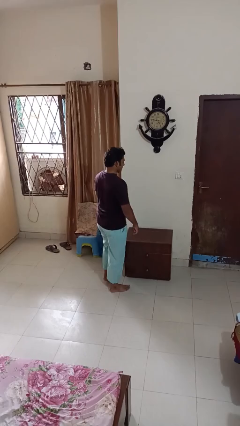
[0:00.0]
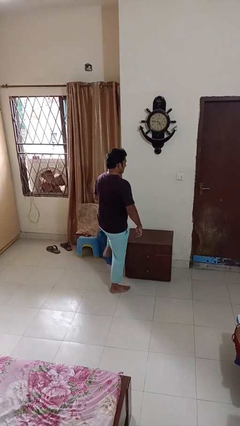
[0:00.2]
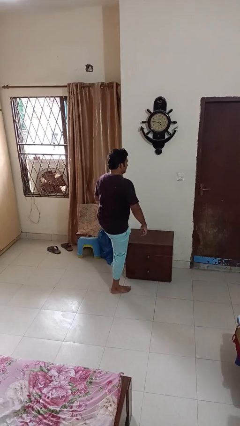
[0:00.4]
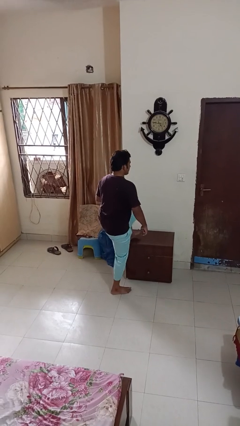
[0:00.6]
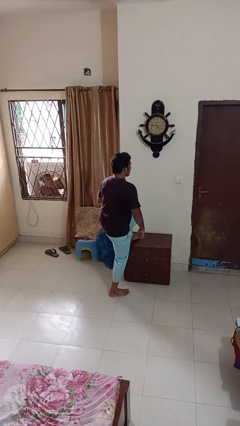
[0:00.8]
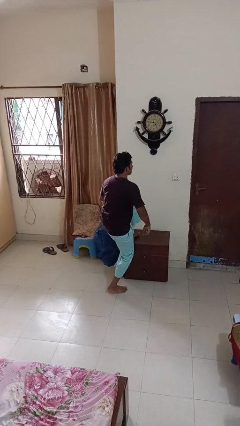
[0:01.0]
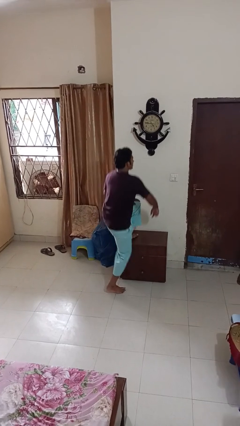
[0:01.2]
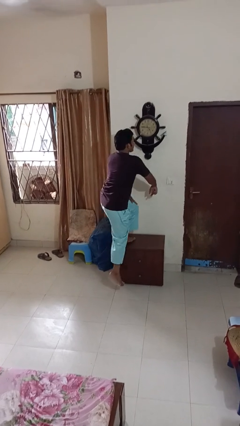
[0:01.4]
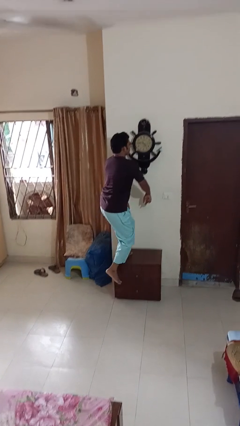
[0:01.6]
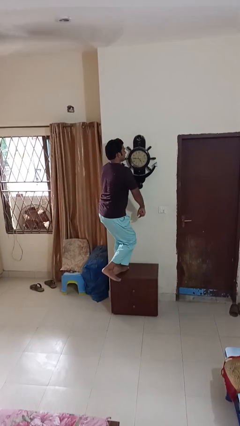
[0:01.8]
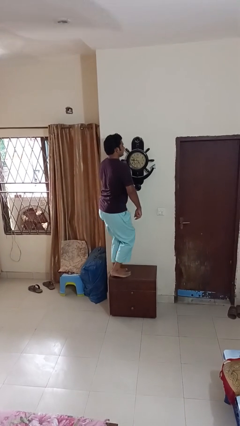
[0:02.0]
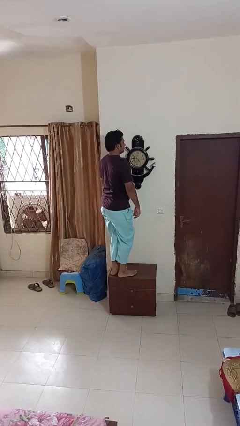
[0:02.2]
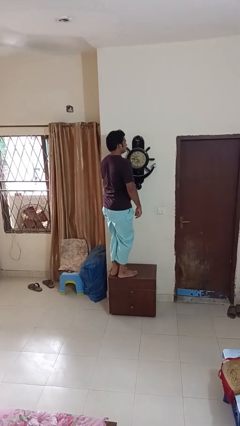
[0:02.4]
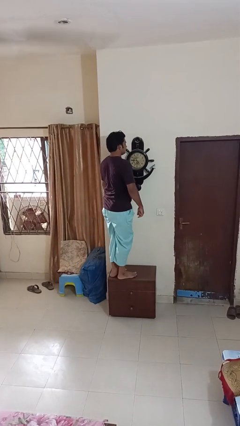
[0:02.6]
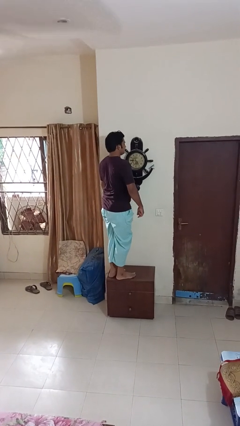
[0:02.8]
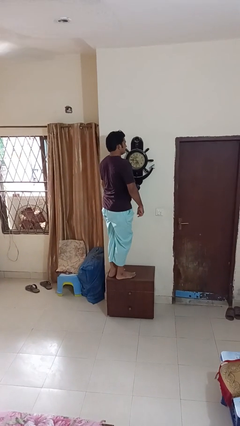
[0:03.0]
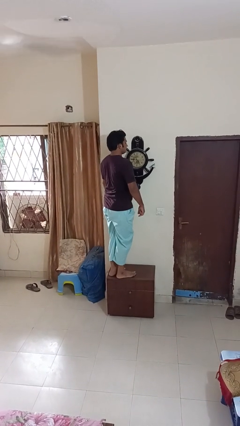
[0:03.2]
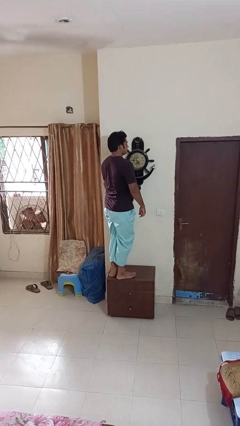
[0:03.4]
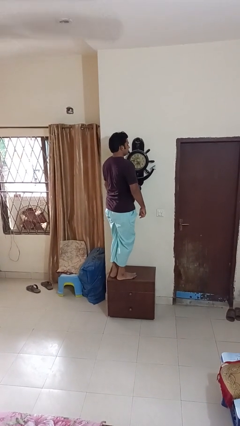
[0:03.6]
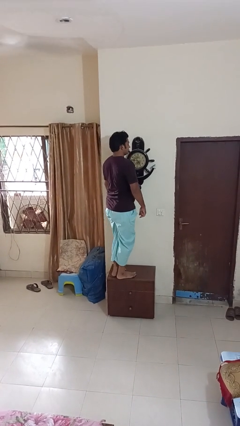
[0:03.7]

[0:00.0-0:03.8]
person climbs on table

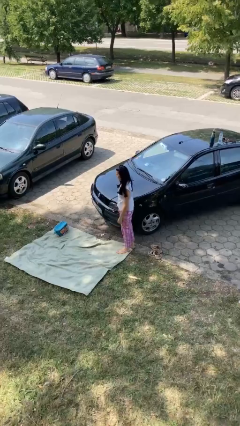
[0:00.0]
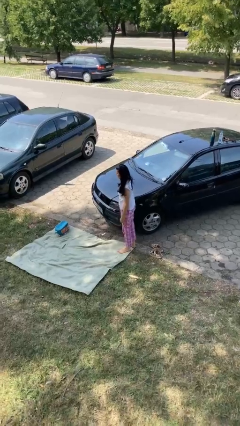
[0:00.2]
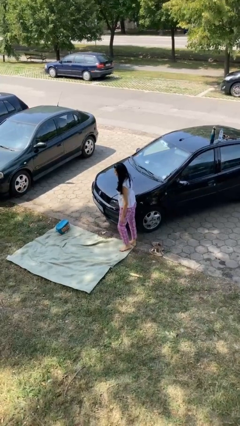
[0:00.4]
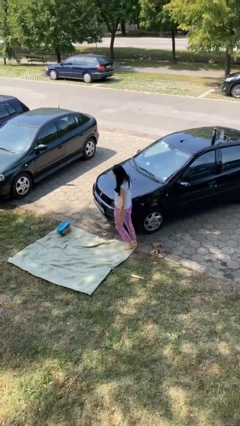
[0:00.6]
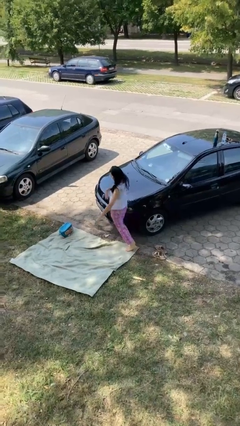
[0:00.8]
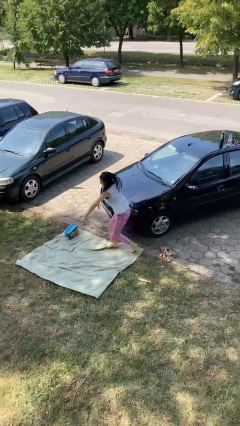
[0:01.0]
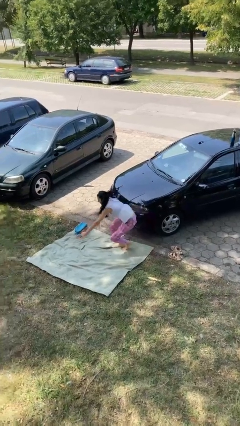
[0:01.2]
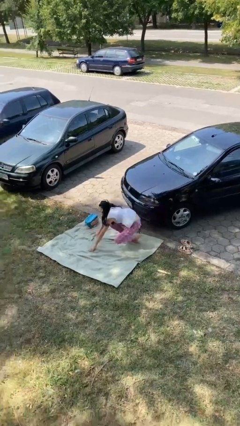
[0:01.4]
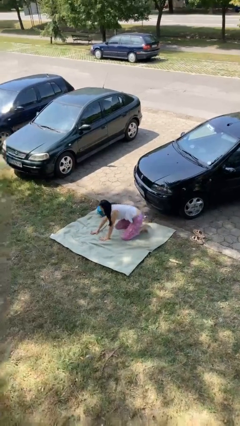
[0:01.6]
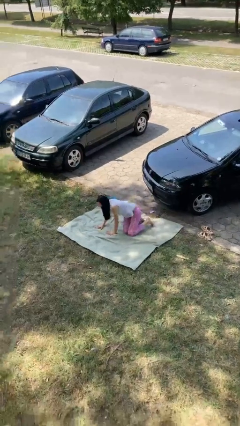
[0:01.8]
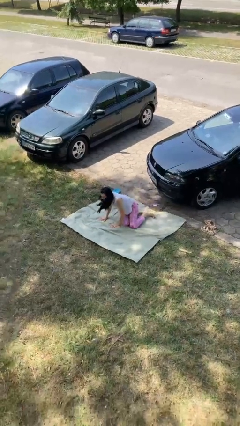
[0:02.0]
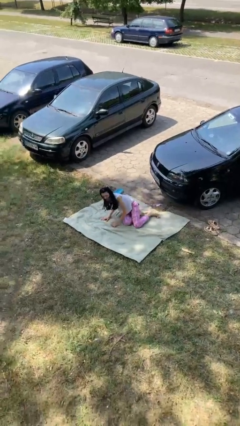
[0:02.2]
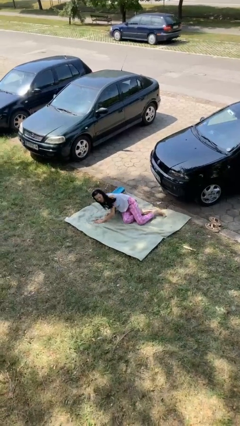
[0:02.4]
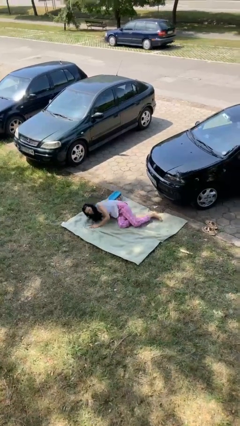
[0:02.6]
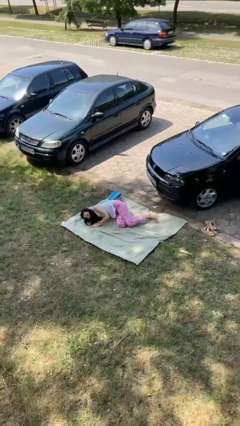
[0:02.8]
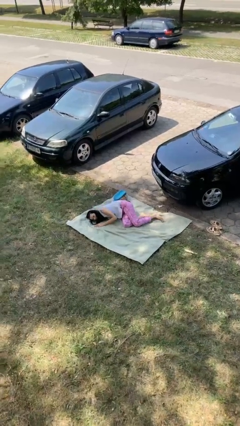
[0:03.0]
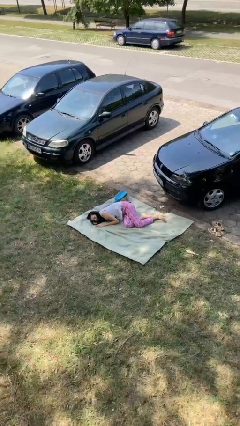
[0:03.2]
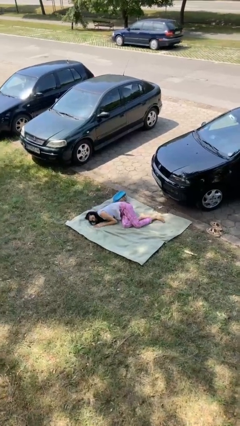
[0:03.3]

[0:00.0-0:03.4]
person trips on object on floor

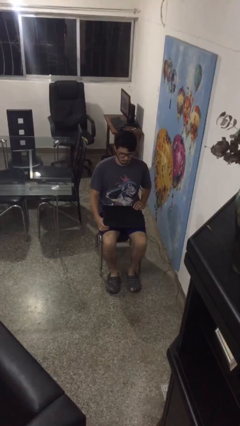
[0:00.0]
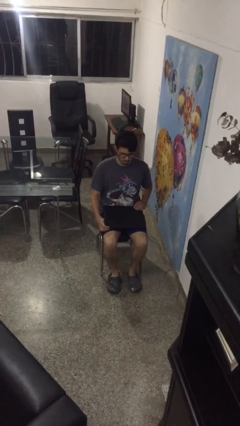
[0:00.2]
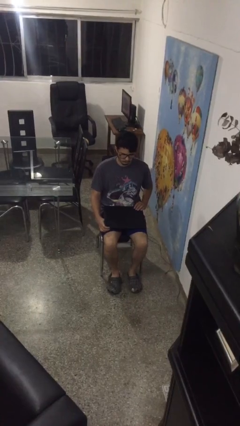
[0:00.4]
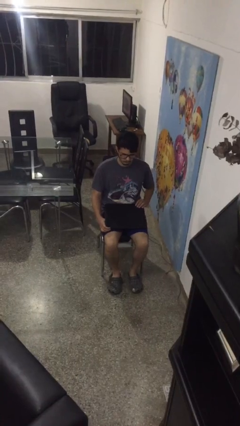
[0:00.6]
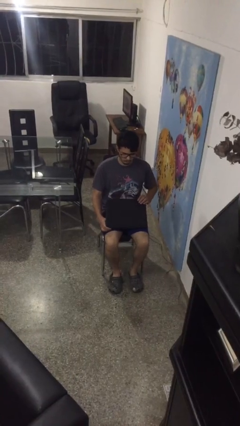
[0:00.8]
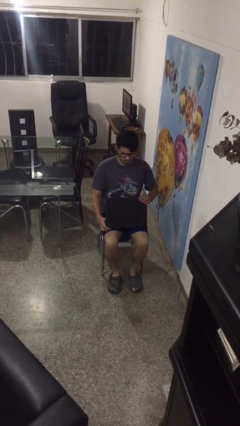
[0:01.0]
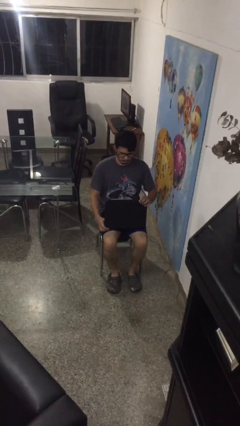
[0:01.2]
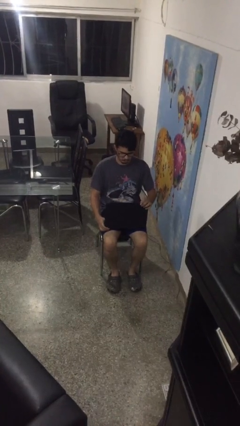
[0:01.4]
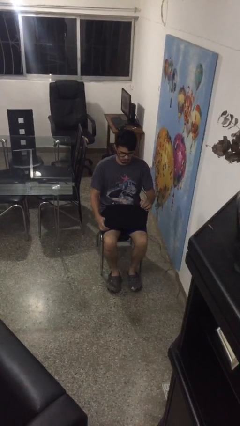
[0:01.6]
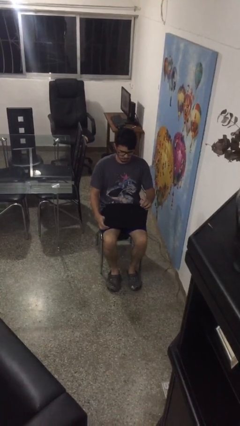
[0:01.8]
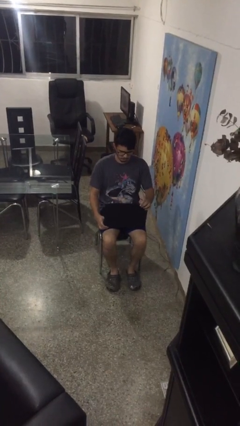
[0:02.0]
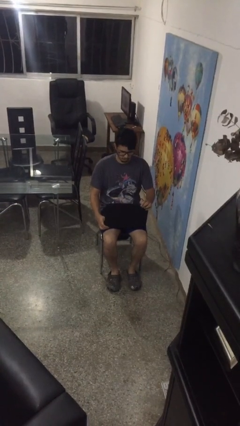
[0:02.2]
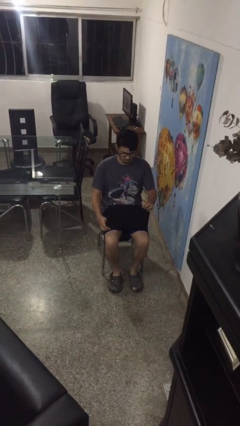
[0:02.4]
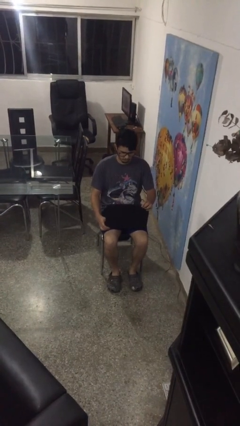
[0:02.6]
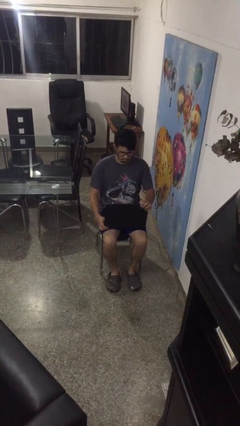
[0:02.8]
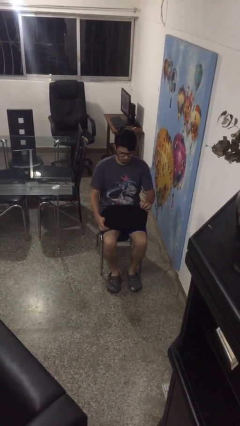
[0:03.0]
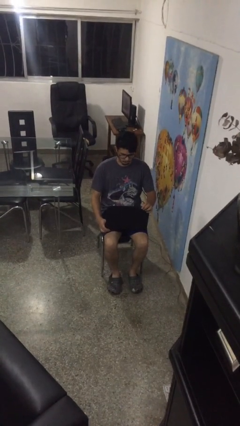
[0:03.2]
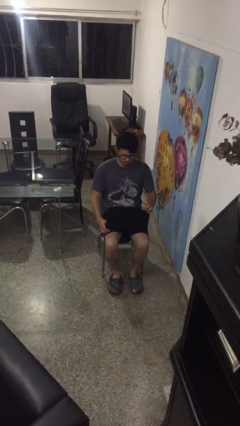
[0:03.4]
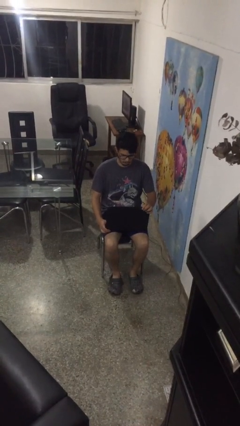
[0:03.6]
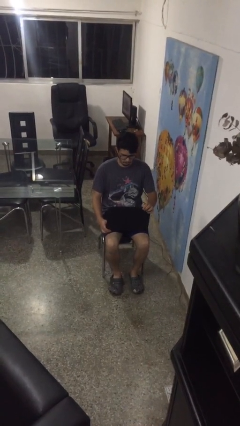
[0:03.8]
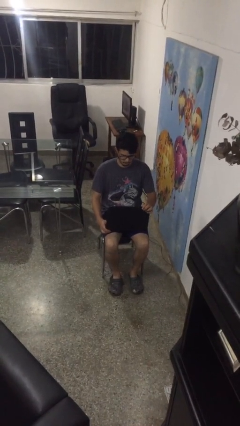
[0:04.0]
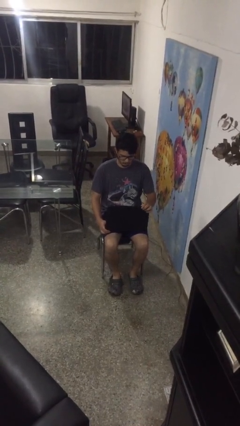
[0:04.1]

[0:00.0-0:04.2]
person opens laptop

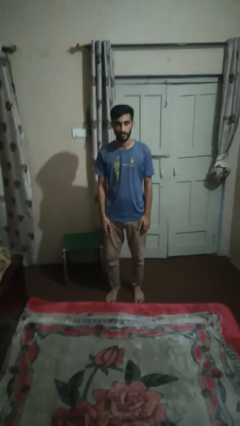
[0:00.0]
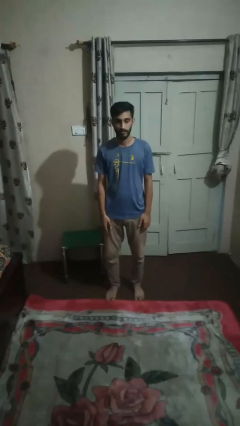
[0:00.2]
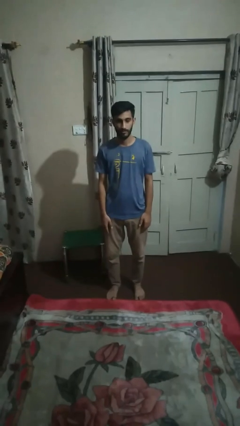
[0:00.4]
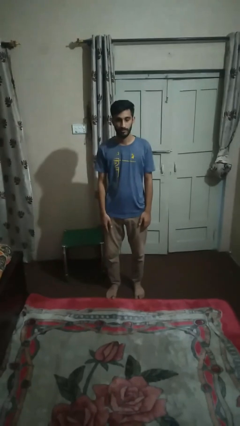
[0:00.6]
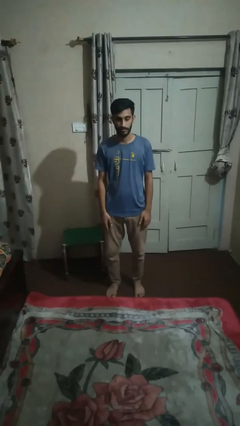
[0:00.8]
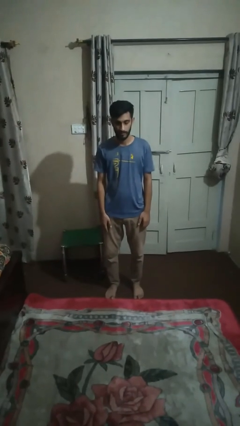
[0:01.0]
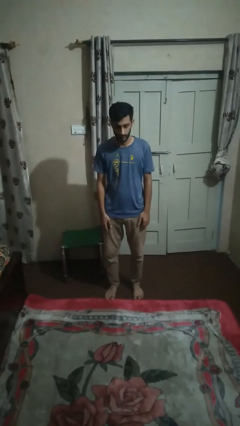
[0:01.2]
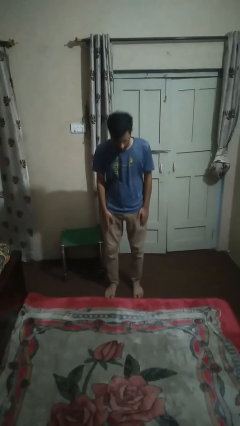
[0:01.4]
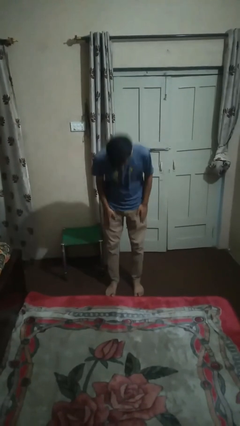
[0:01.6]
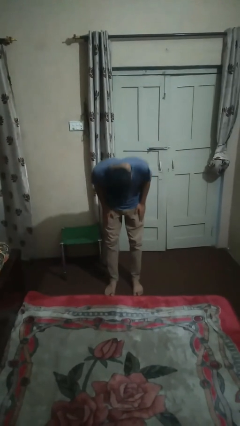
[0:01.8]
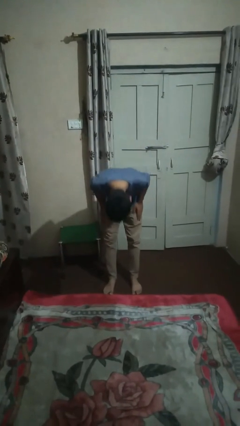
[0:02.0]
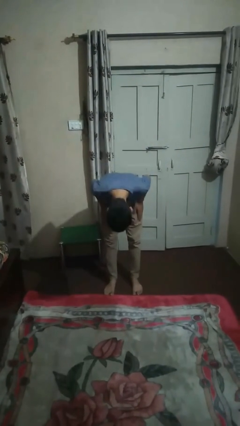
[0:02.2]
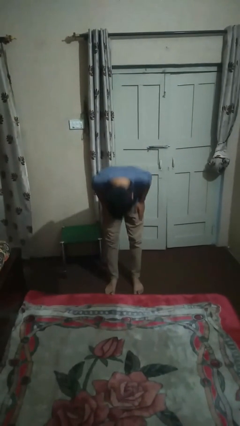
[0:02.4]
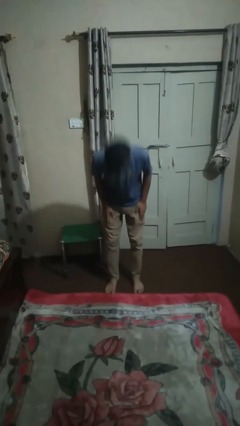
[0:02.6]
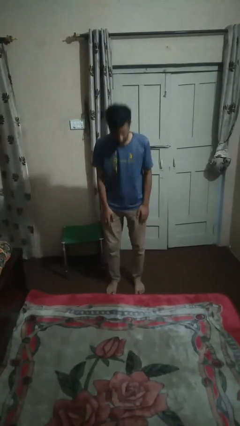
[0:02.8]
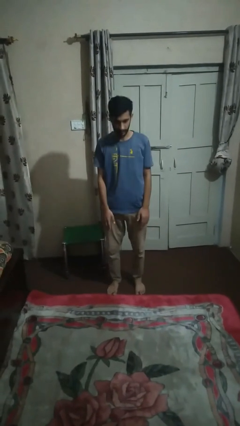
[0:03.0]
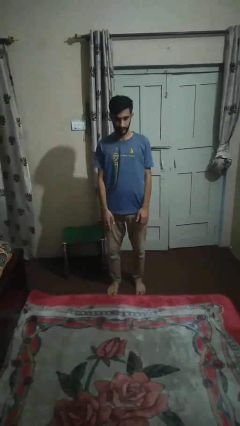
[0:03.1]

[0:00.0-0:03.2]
person bows

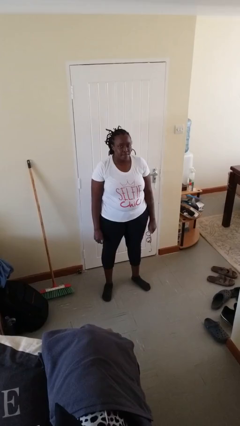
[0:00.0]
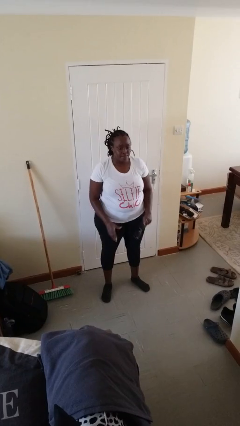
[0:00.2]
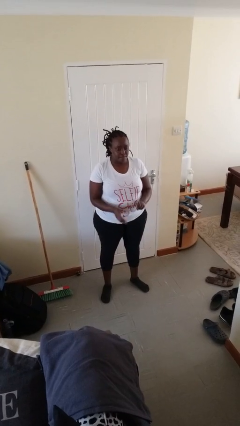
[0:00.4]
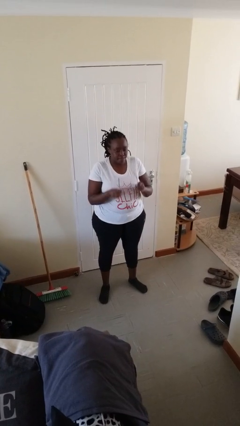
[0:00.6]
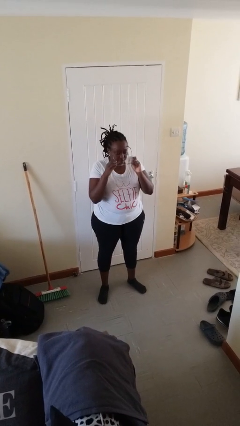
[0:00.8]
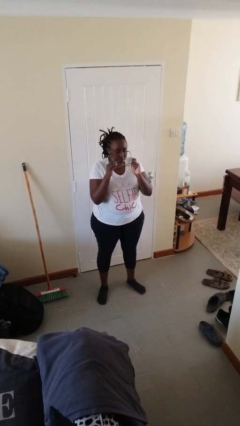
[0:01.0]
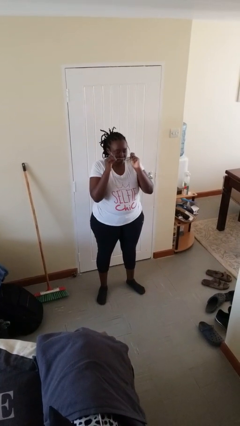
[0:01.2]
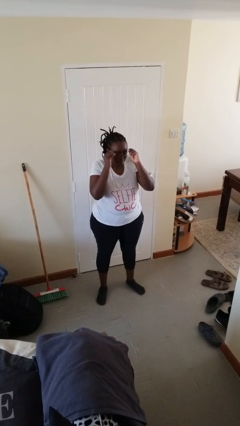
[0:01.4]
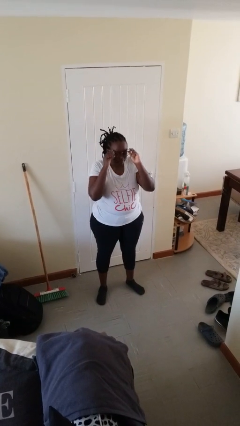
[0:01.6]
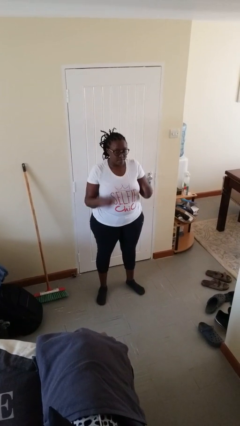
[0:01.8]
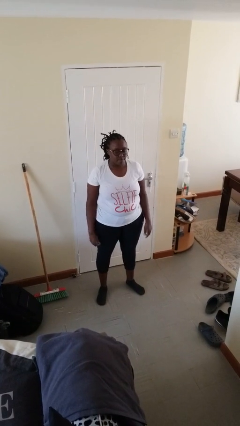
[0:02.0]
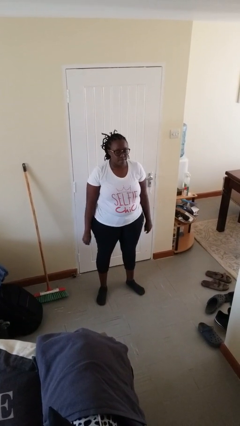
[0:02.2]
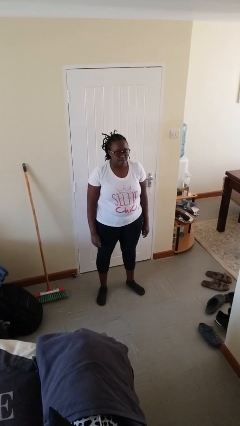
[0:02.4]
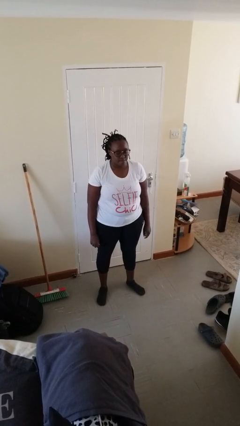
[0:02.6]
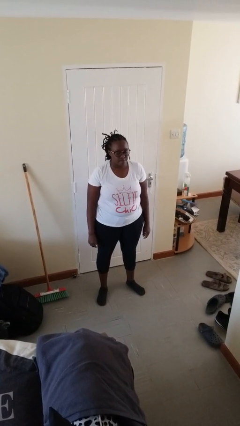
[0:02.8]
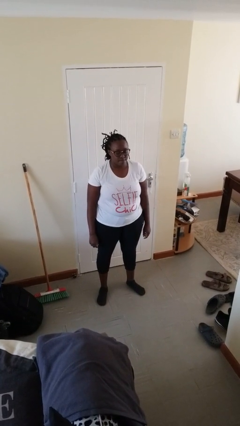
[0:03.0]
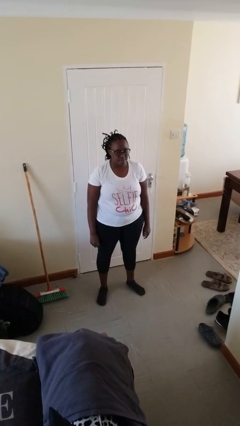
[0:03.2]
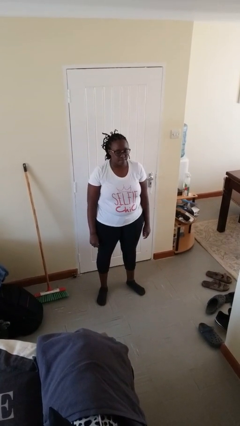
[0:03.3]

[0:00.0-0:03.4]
person puts on glasses
